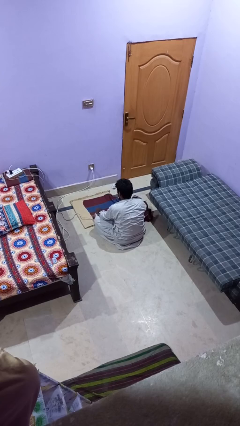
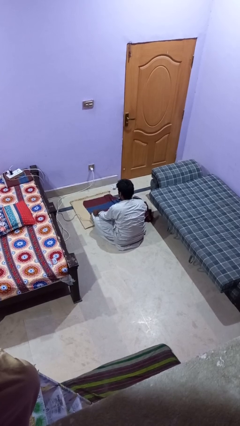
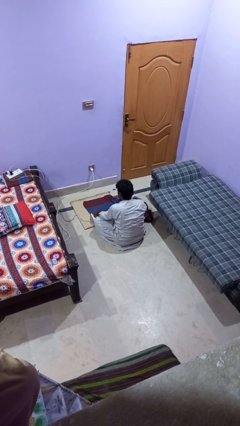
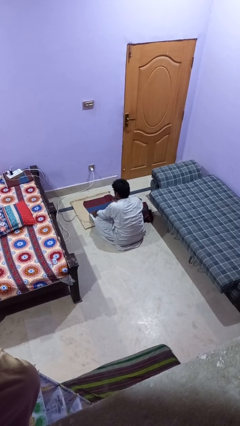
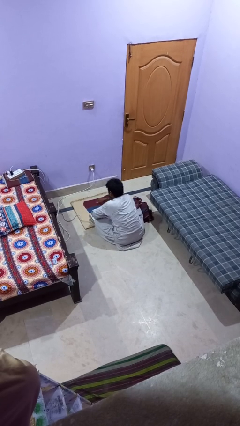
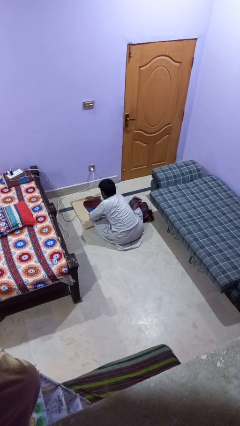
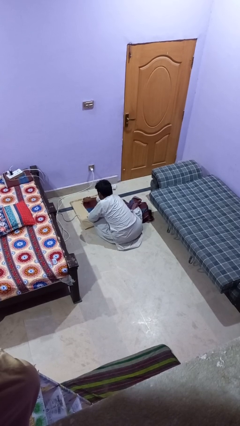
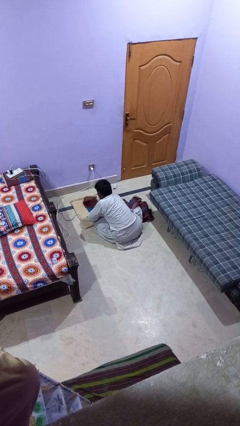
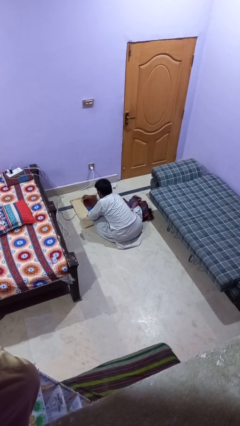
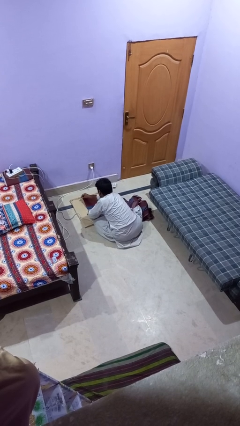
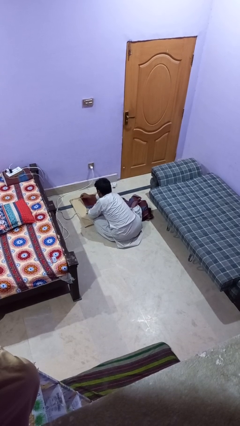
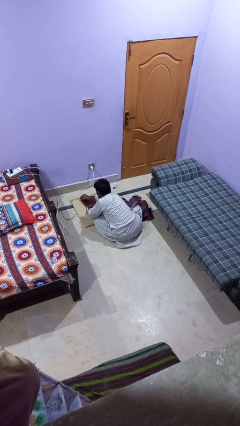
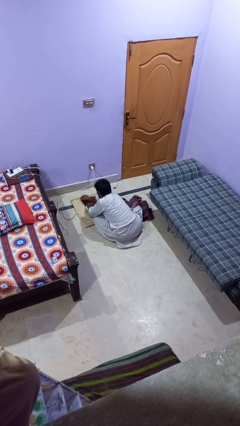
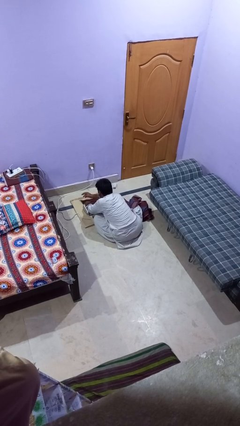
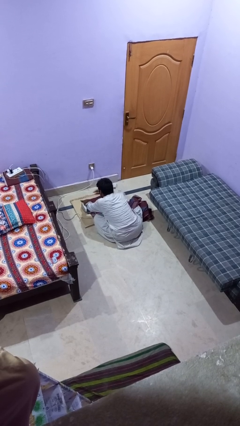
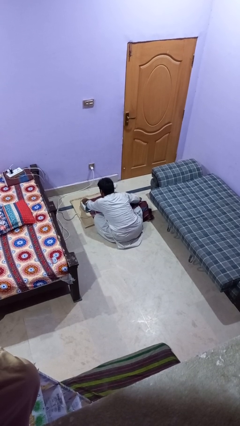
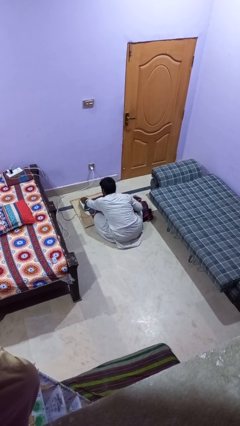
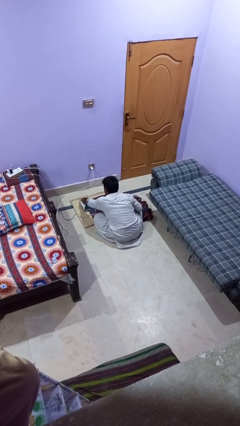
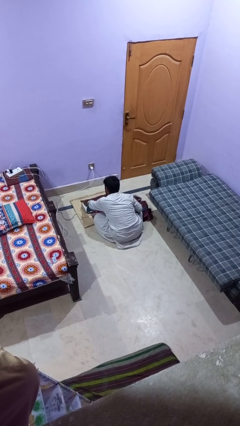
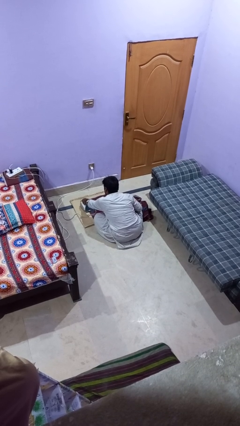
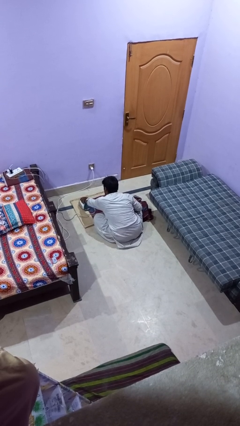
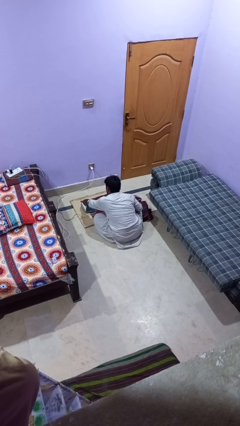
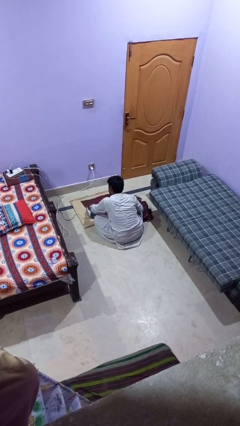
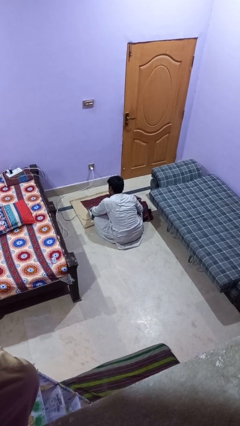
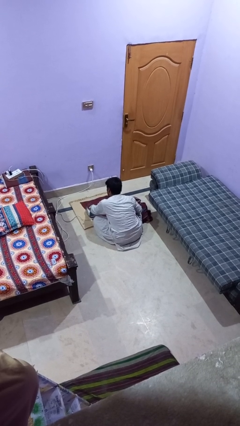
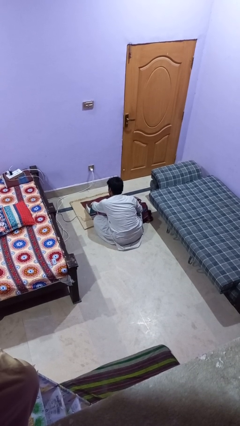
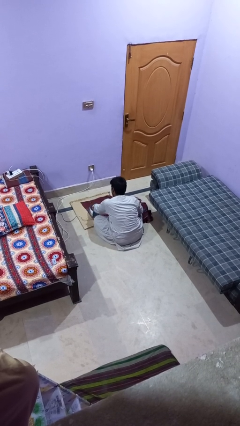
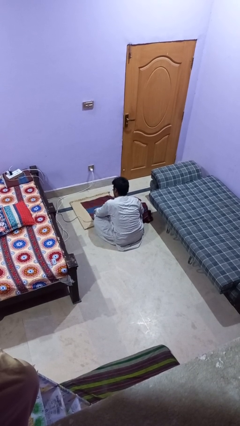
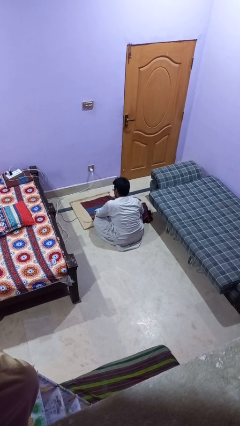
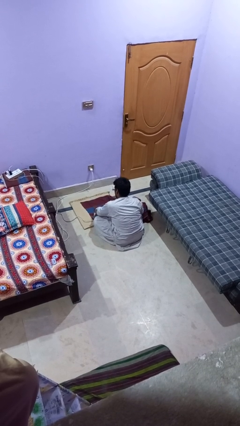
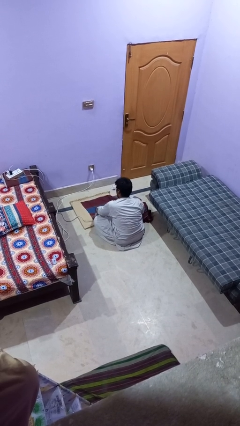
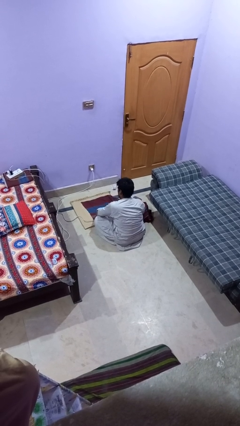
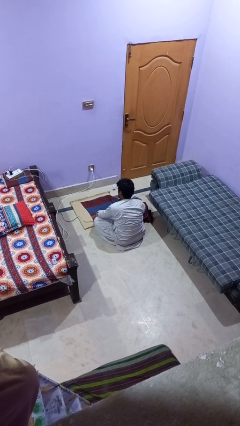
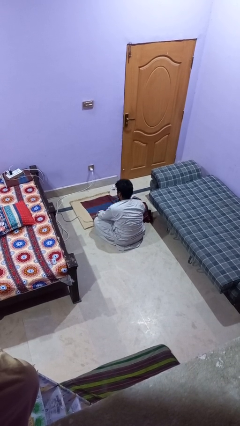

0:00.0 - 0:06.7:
person irons clothes

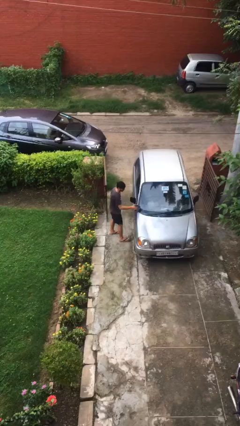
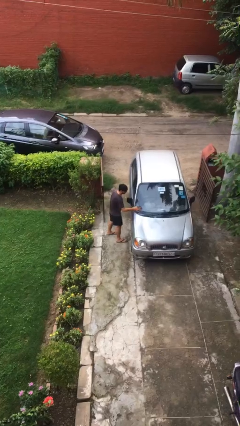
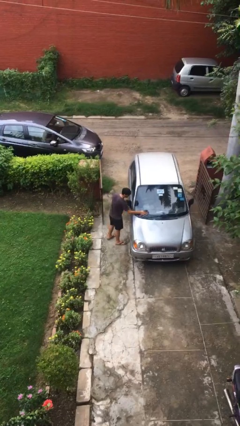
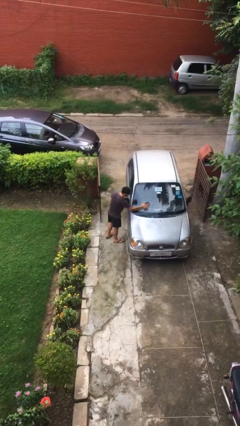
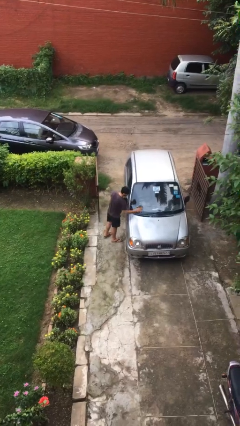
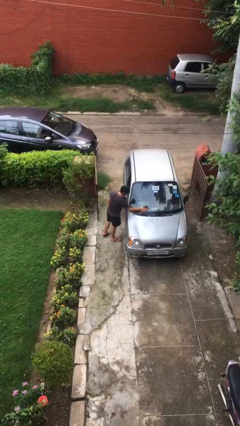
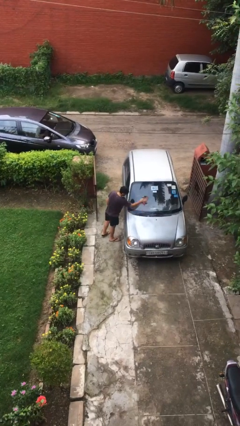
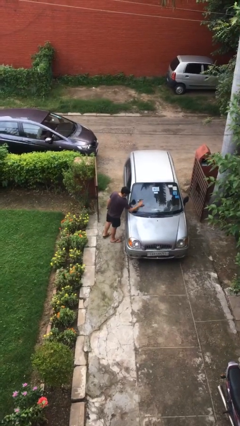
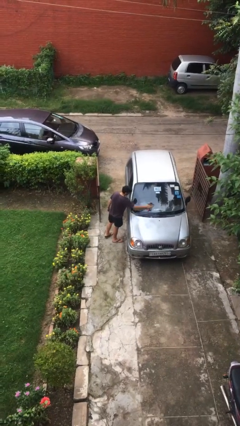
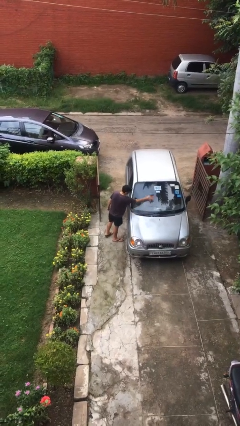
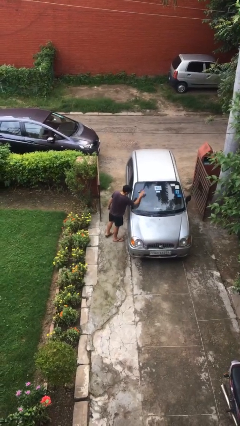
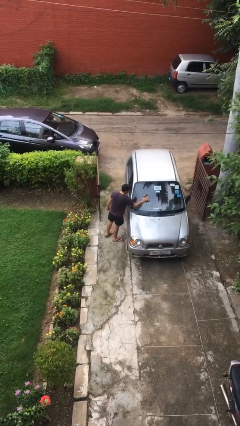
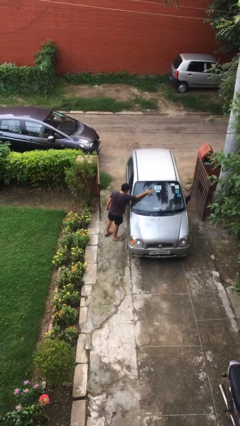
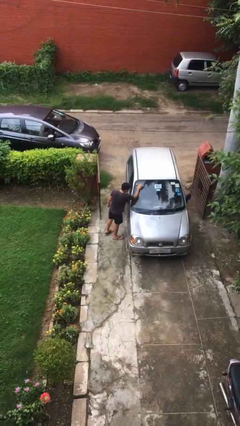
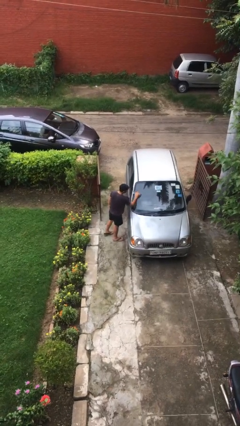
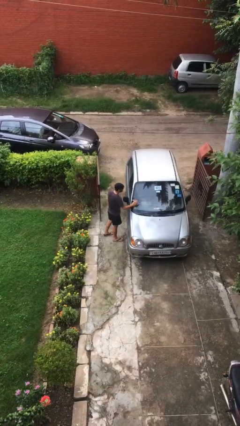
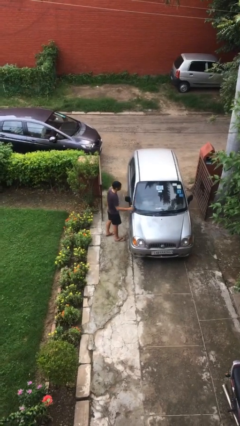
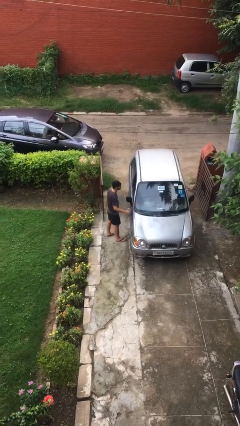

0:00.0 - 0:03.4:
person polishes car with rag

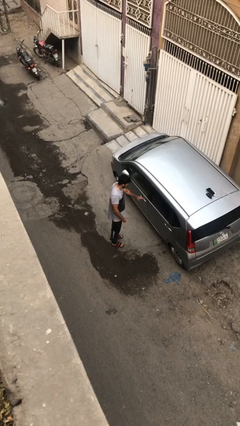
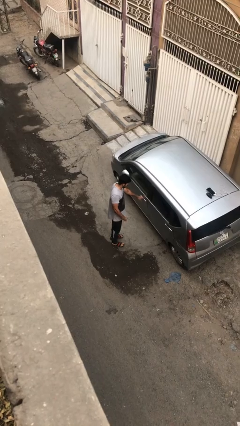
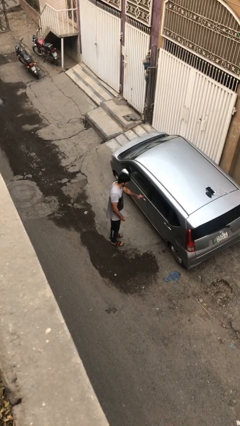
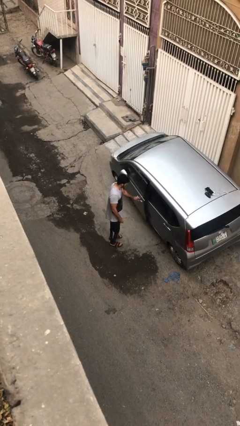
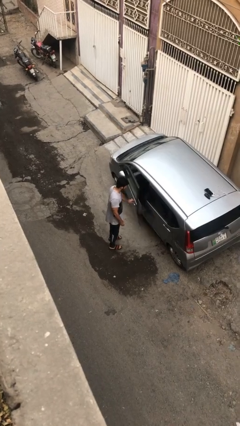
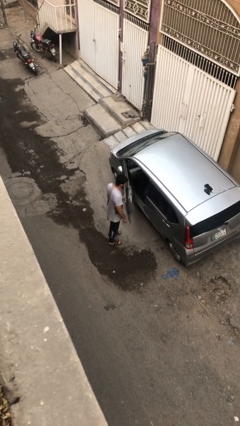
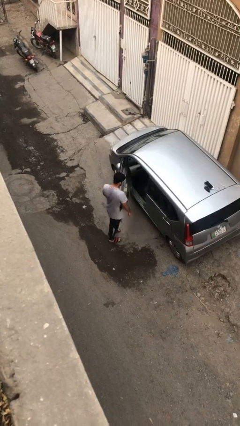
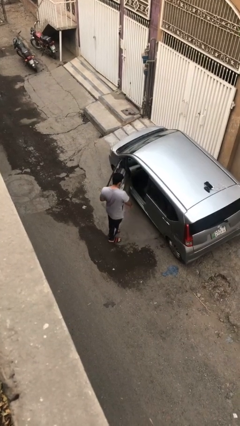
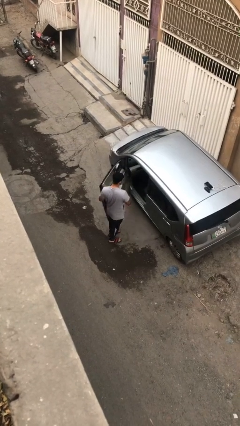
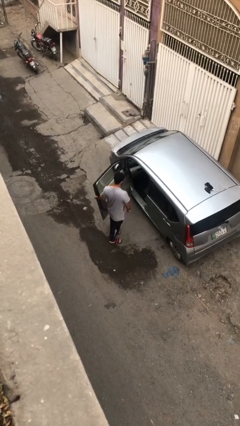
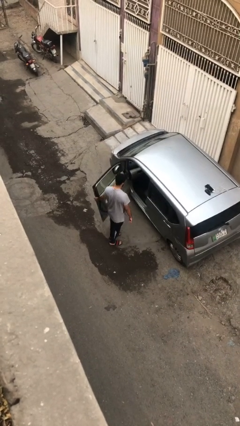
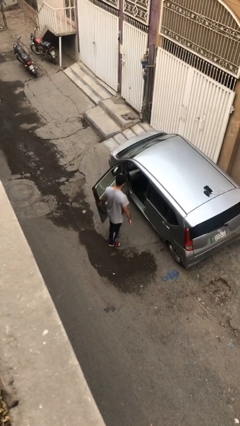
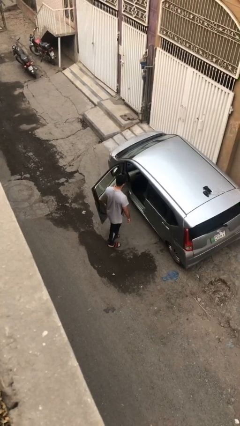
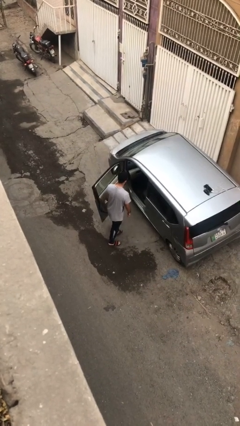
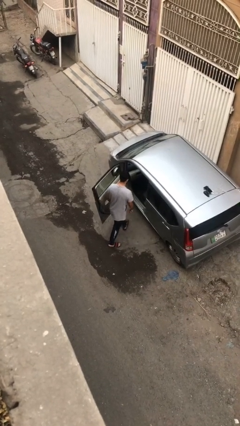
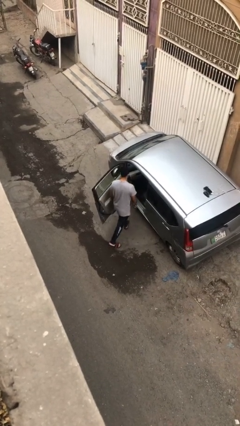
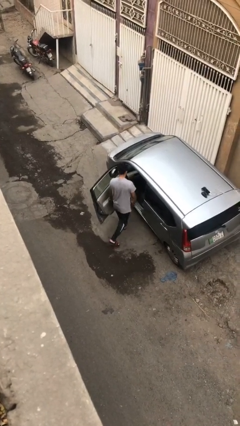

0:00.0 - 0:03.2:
person opens car door

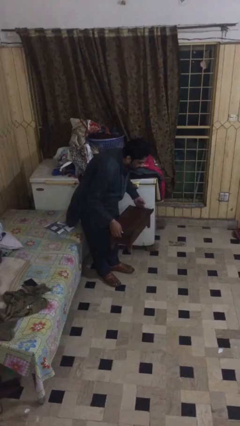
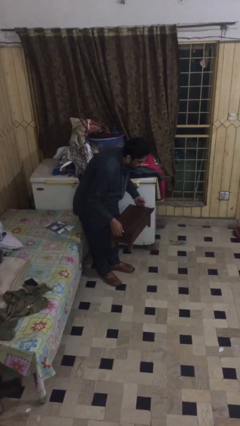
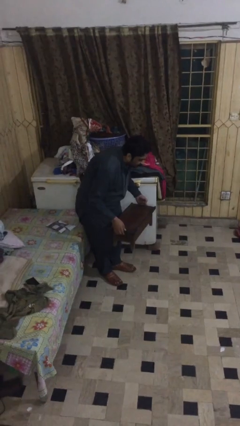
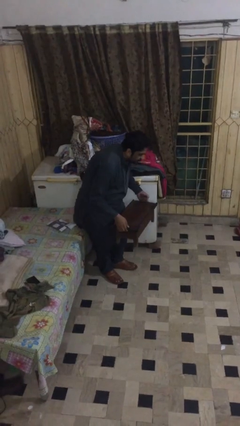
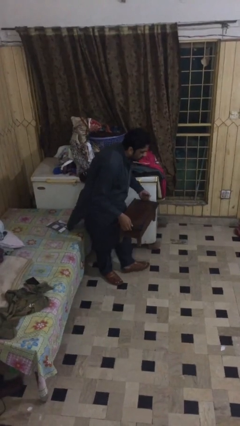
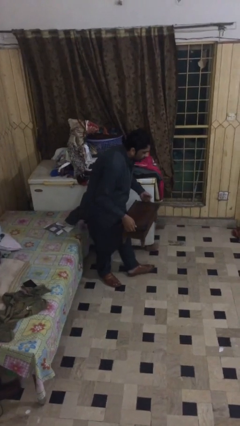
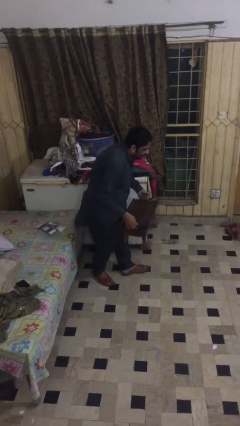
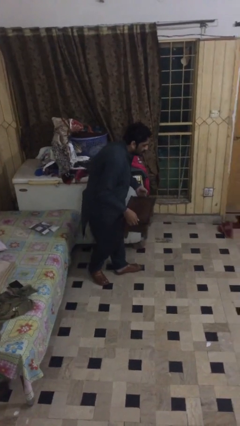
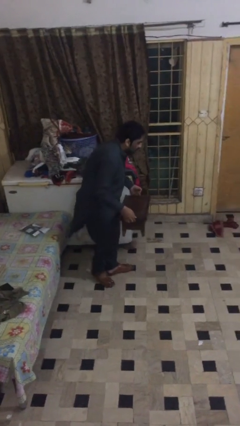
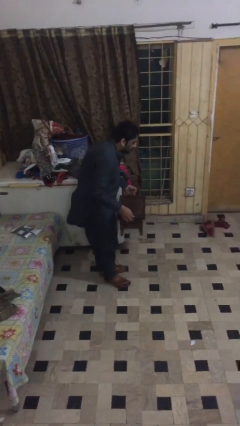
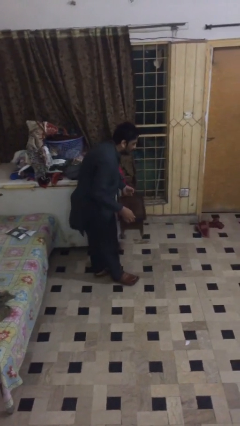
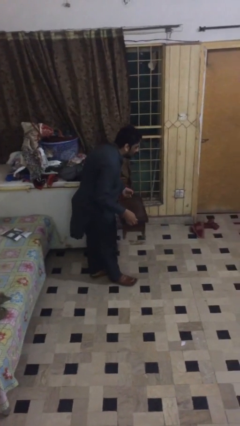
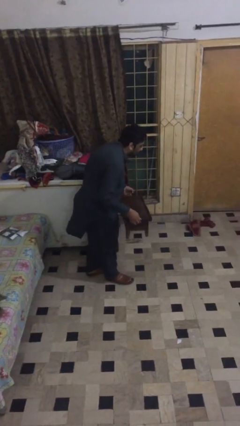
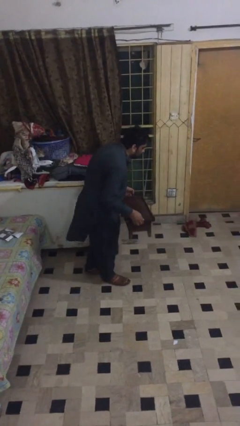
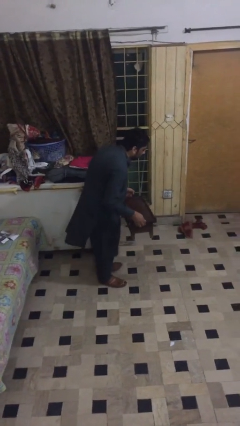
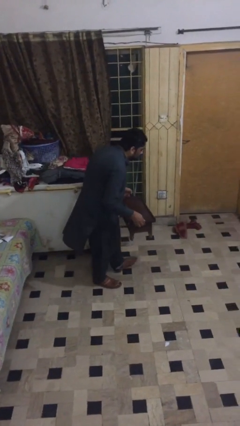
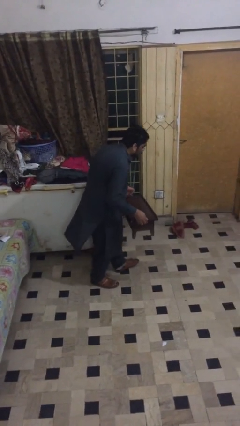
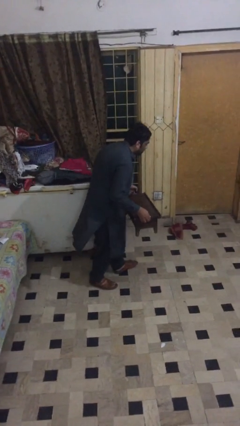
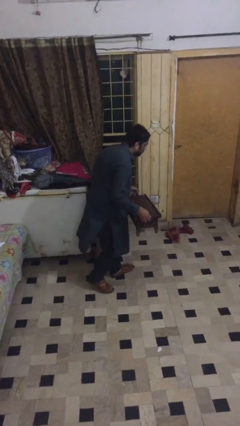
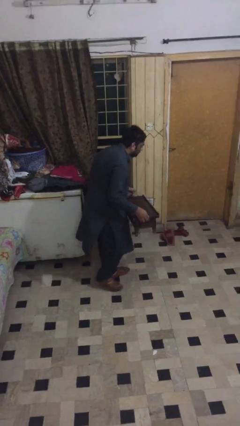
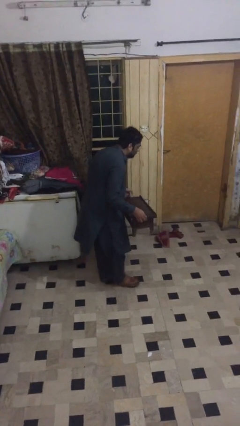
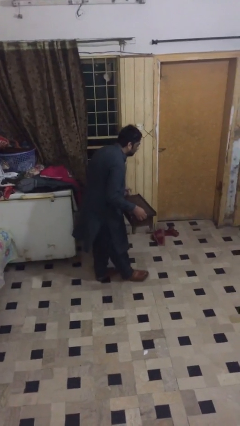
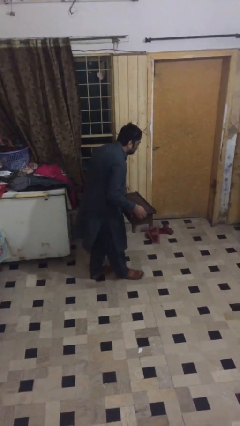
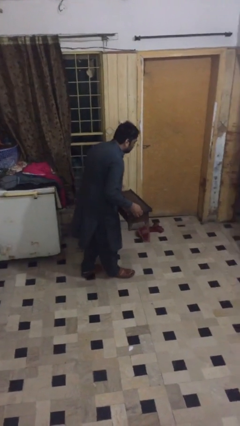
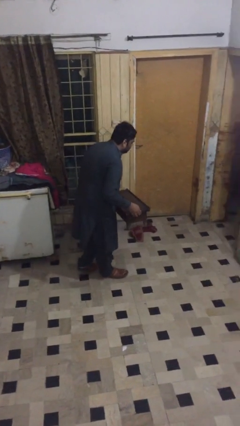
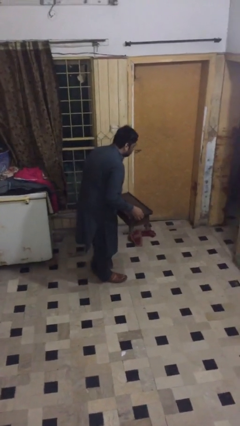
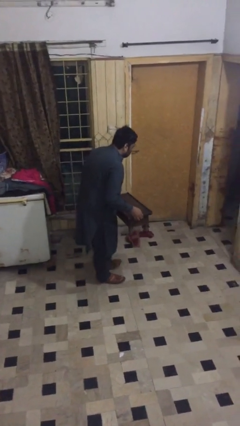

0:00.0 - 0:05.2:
person carries heavy object
